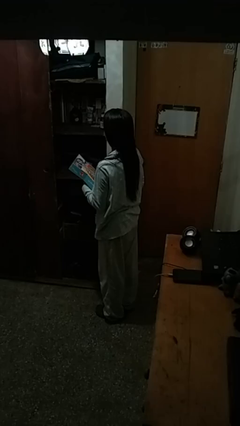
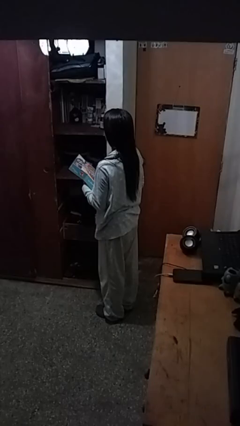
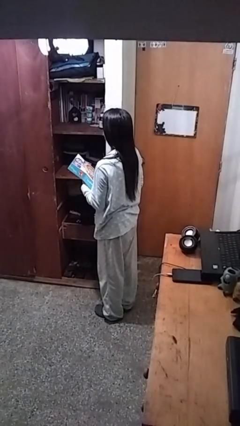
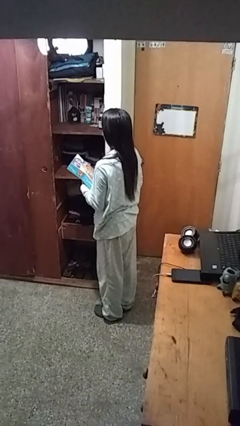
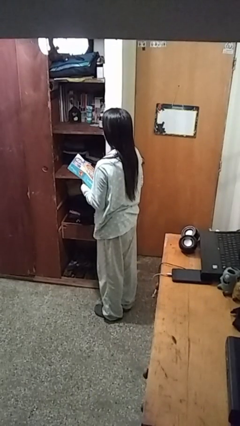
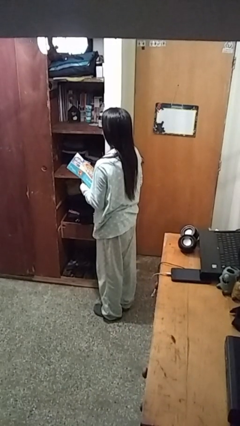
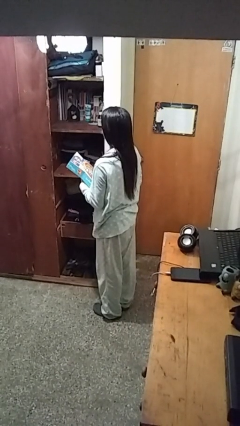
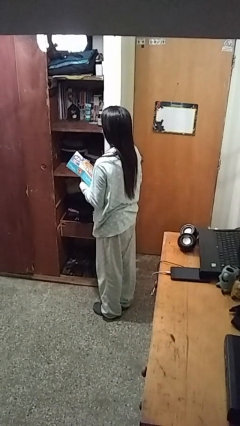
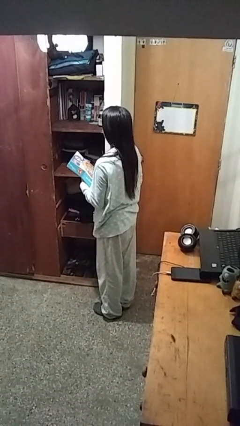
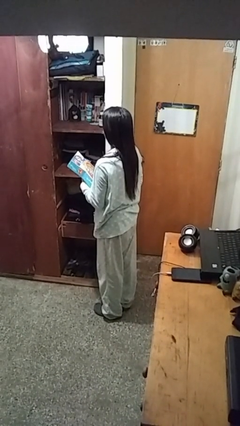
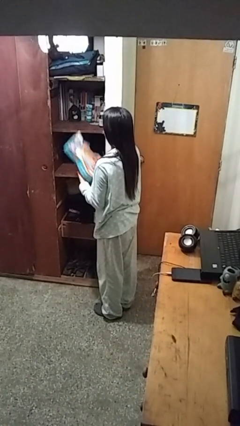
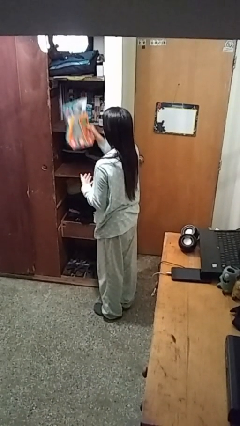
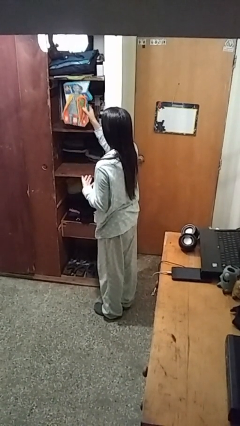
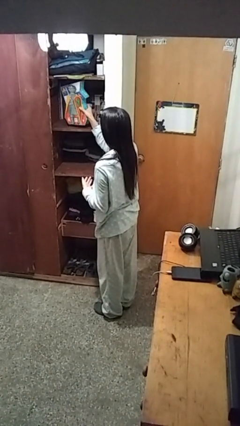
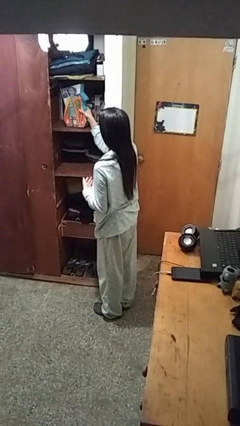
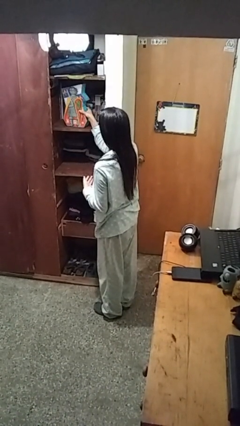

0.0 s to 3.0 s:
person picks up object from shelf

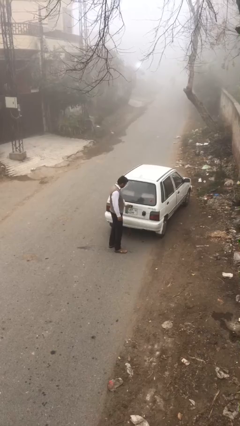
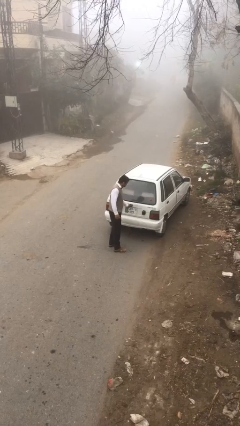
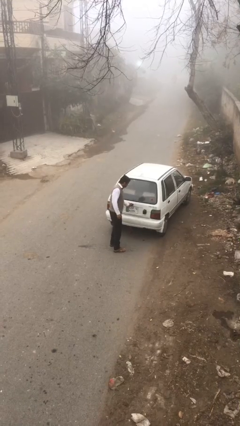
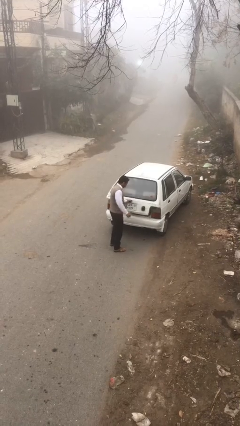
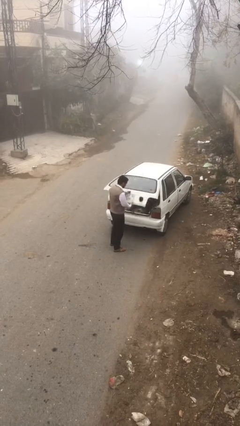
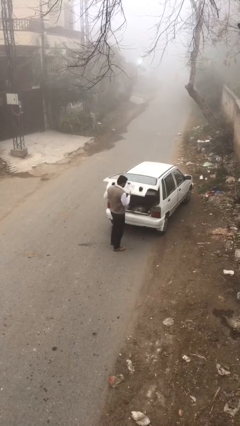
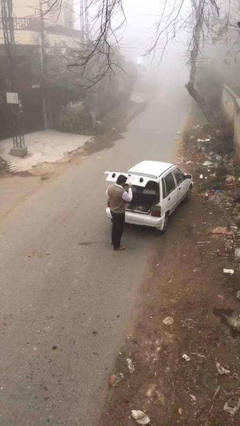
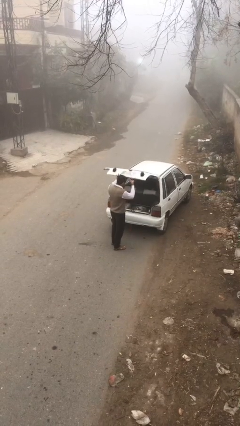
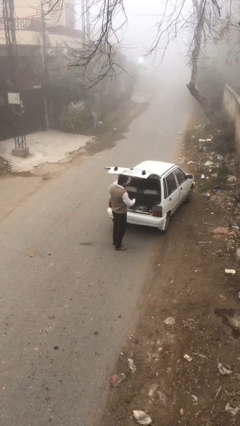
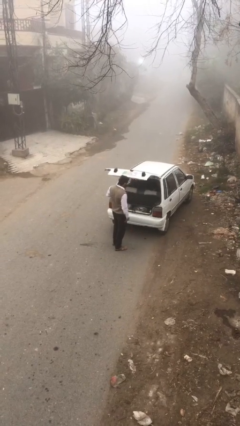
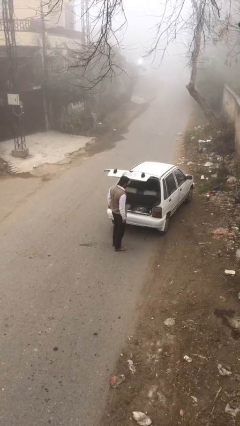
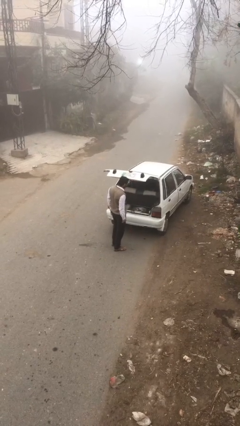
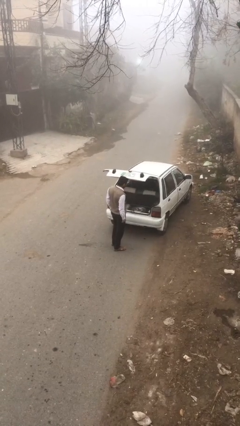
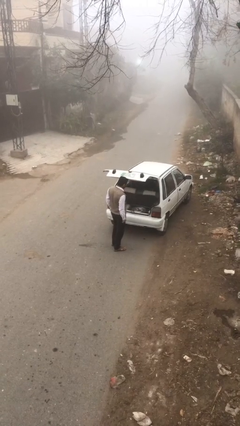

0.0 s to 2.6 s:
person opens car trunk

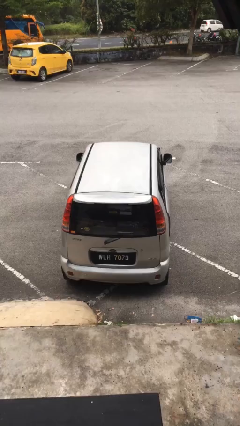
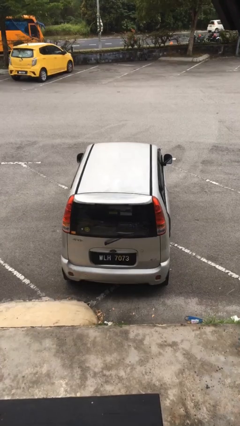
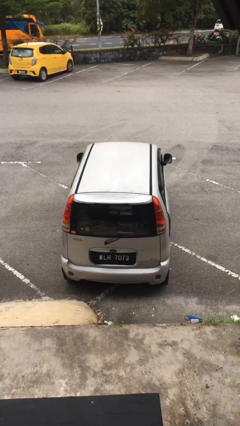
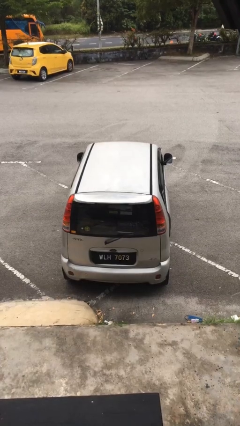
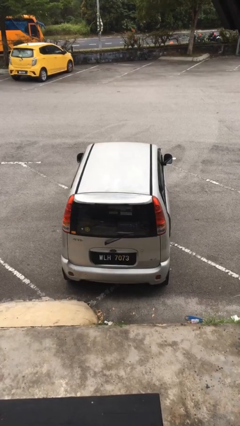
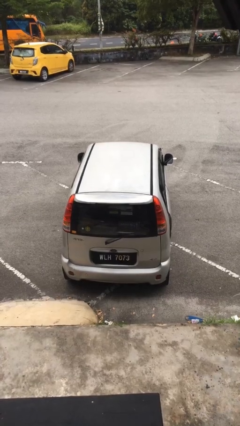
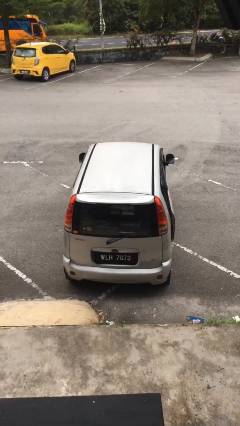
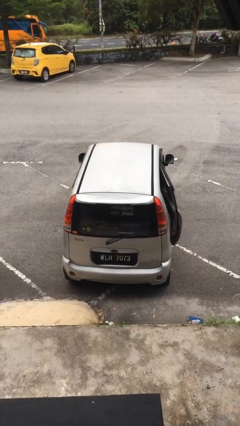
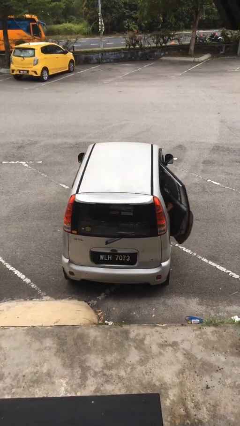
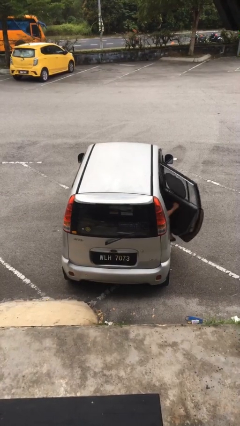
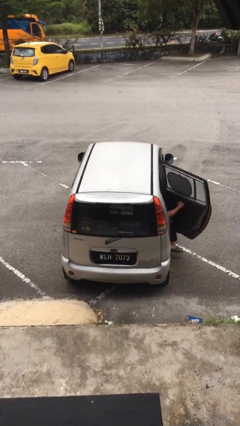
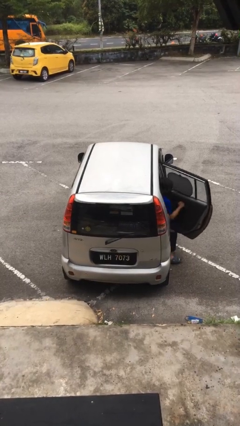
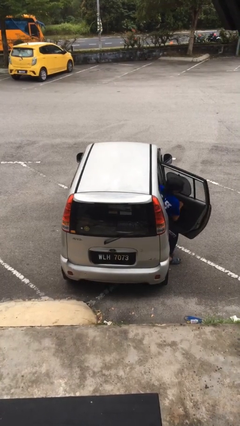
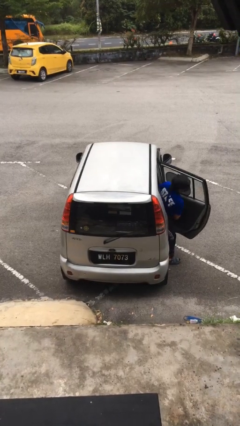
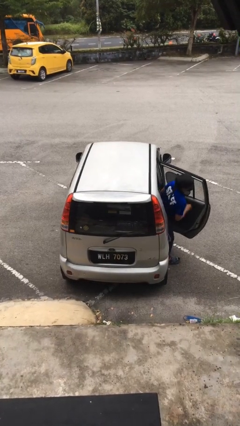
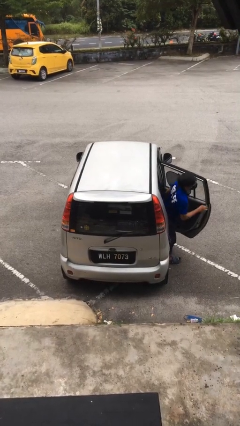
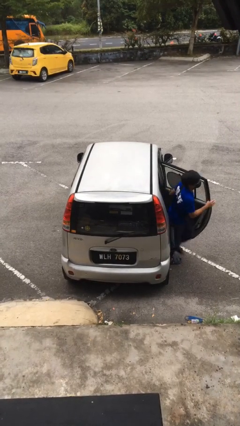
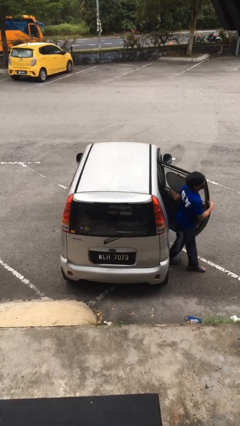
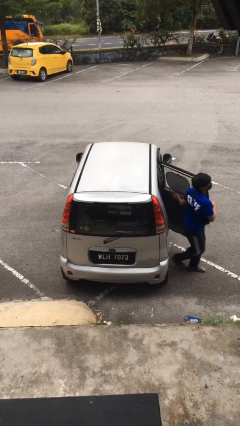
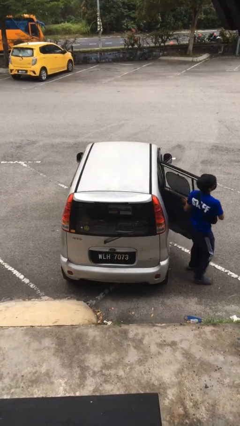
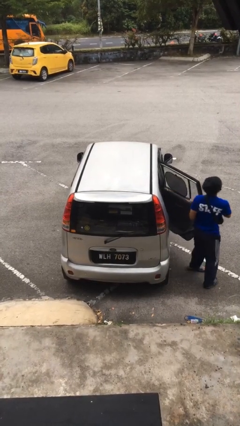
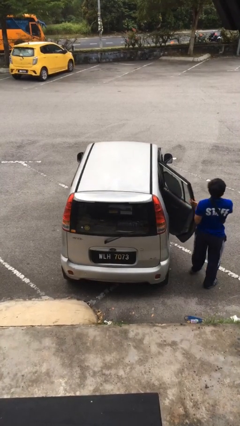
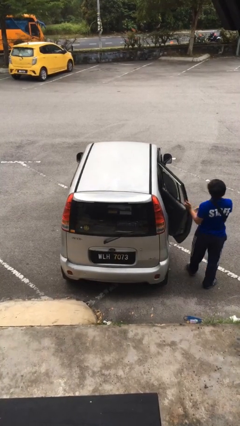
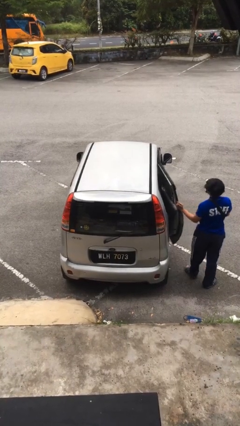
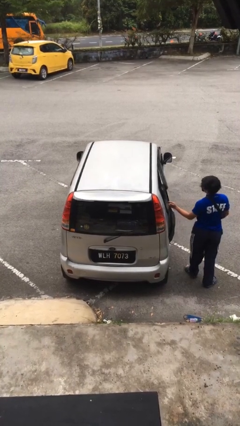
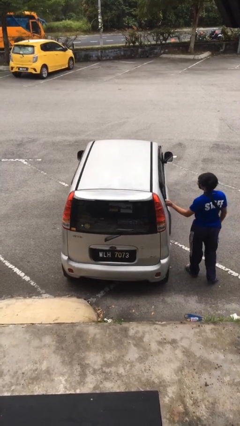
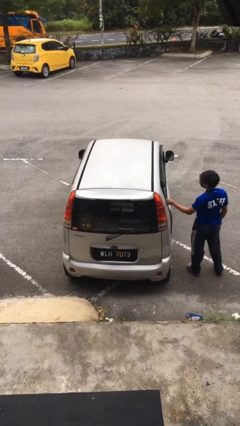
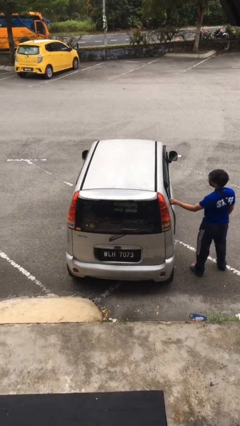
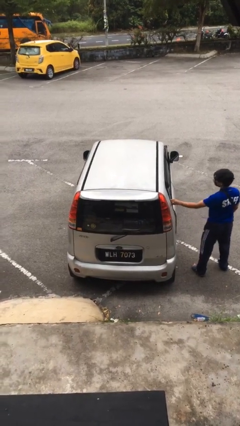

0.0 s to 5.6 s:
car drops off person

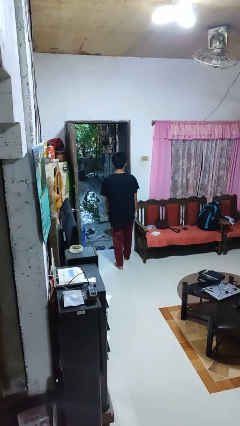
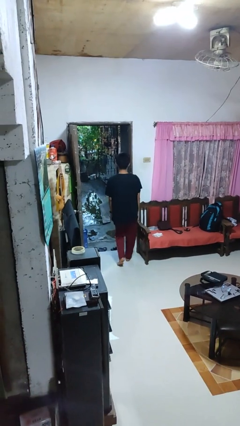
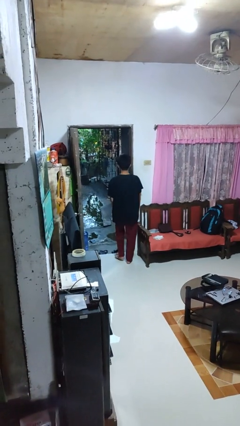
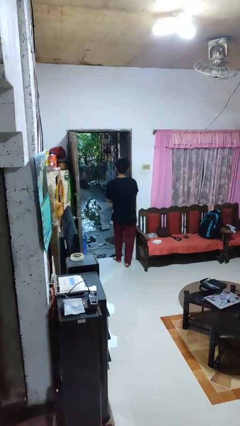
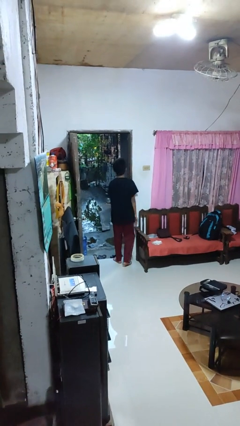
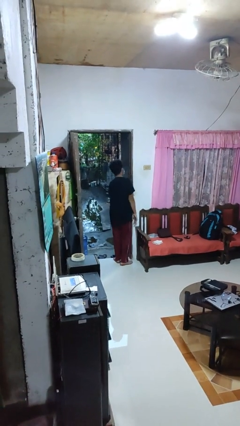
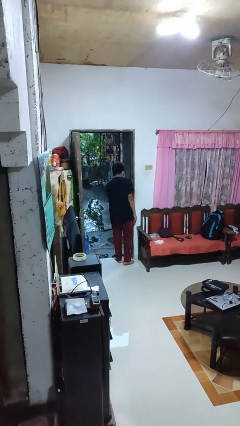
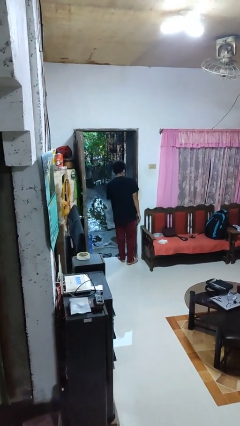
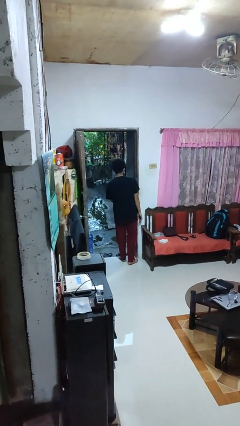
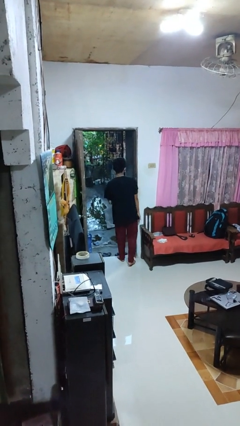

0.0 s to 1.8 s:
person bumps into wall

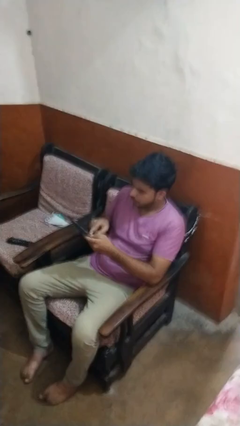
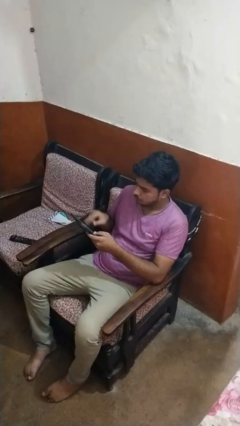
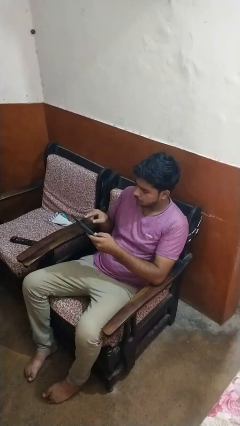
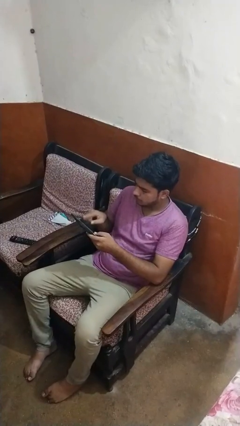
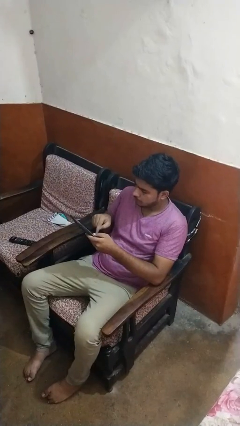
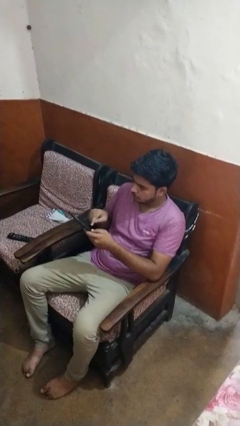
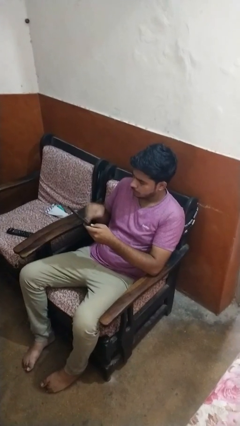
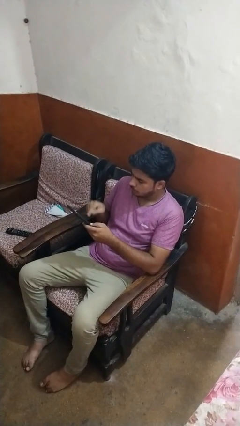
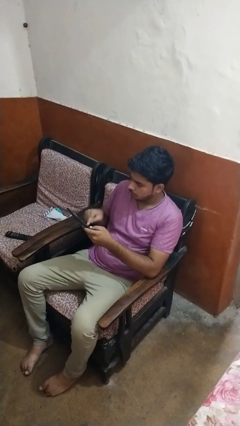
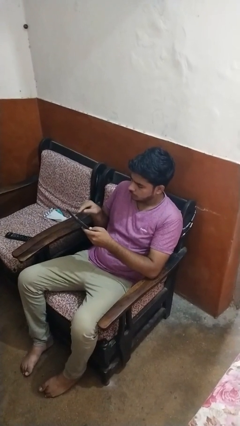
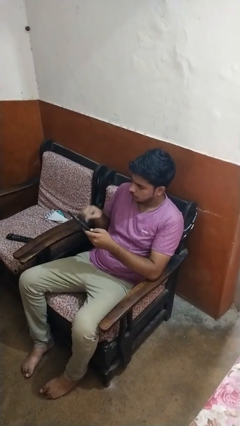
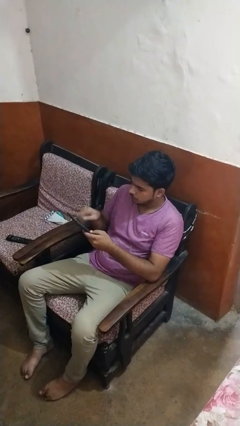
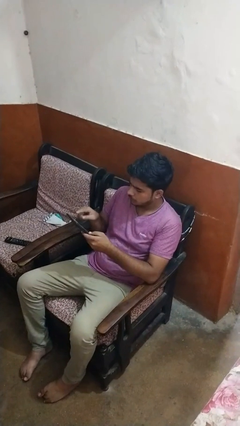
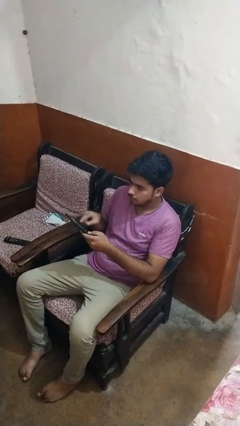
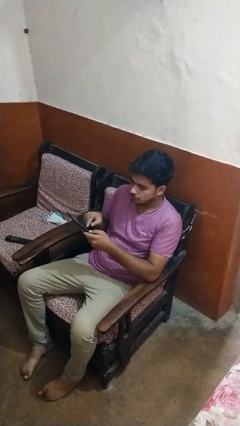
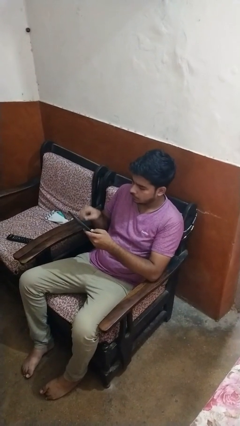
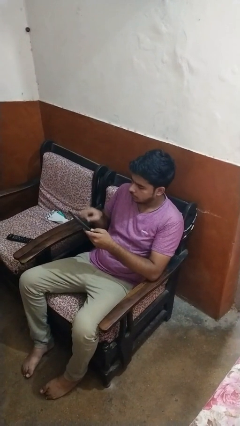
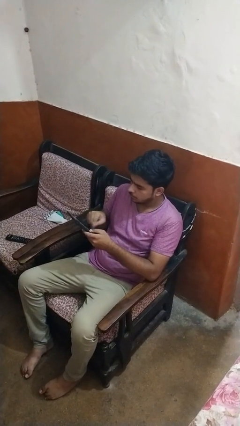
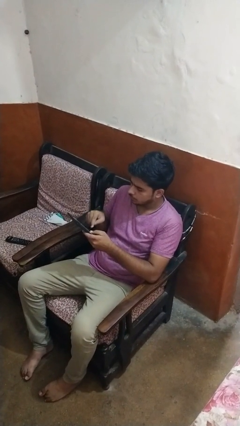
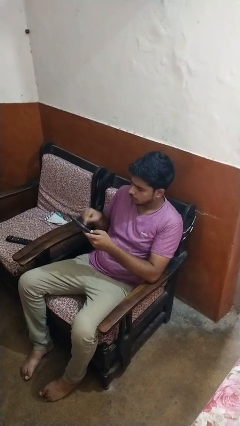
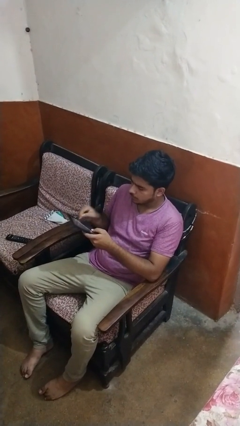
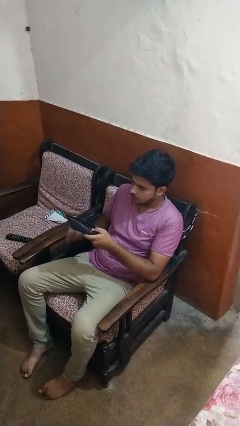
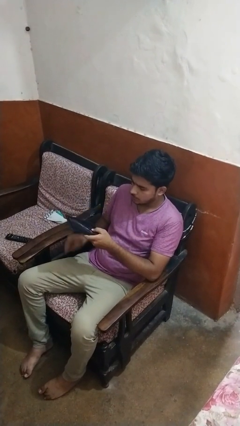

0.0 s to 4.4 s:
person interacts with tablet
